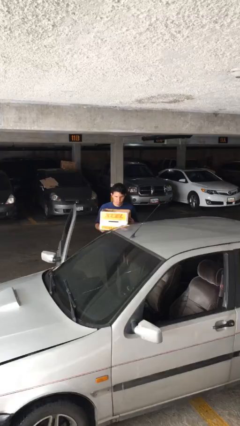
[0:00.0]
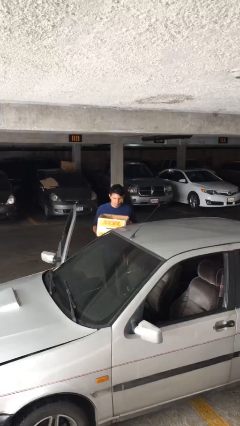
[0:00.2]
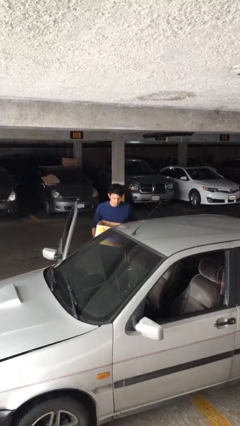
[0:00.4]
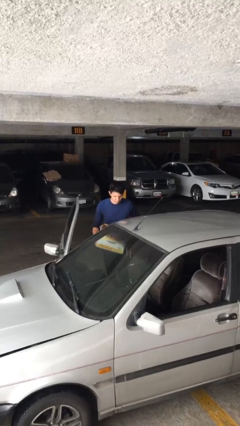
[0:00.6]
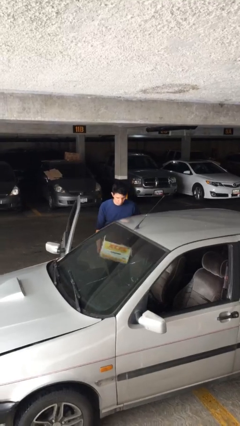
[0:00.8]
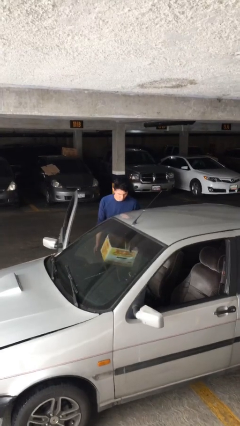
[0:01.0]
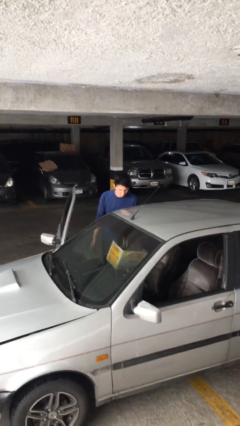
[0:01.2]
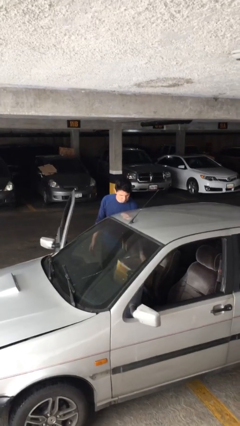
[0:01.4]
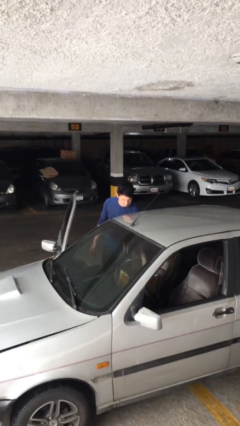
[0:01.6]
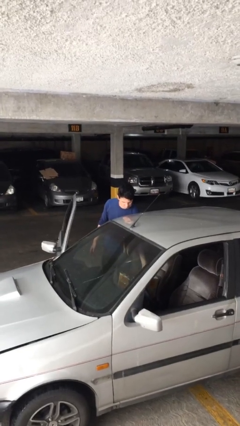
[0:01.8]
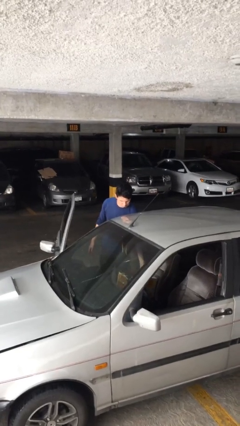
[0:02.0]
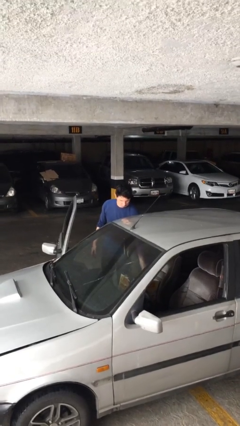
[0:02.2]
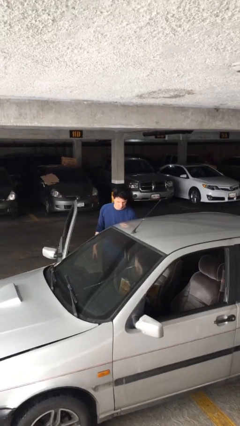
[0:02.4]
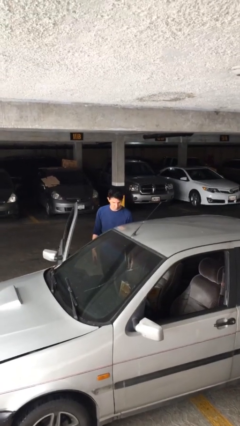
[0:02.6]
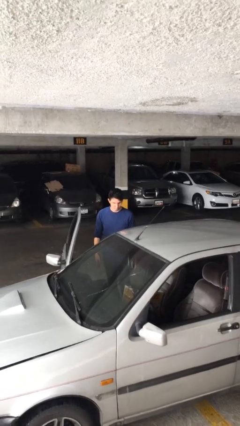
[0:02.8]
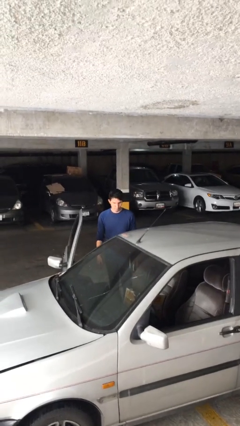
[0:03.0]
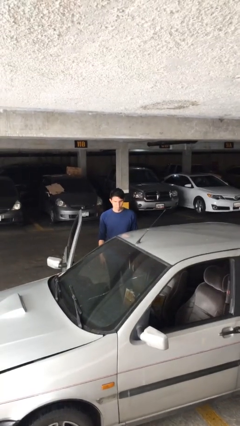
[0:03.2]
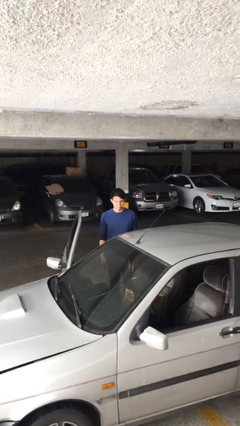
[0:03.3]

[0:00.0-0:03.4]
person loads car

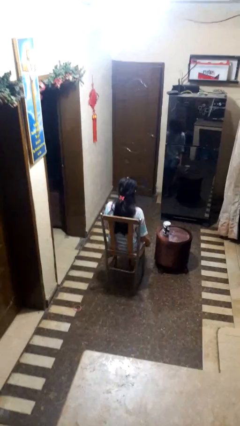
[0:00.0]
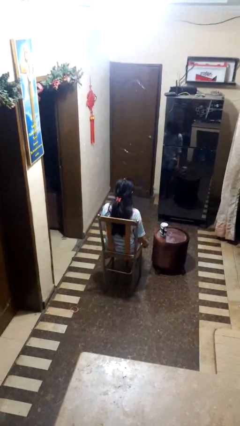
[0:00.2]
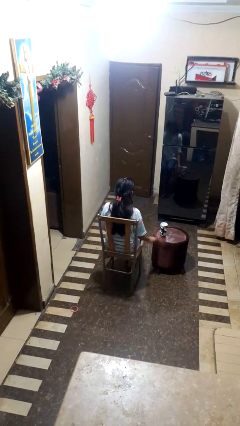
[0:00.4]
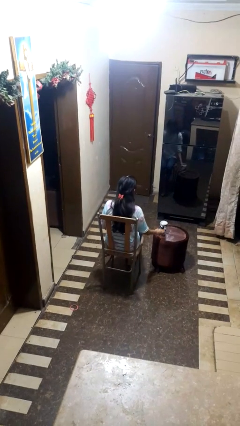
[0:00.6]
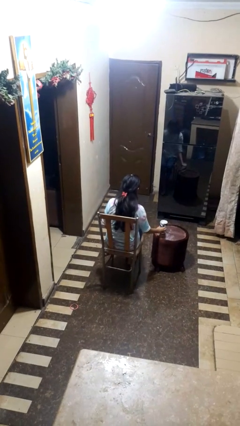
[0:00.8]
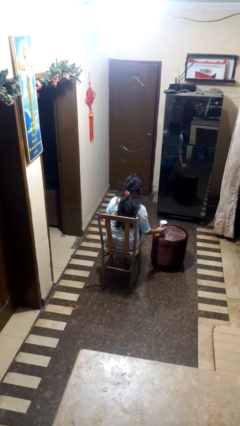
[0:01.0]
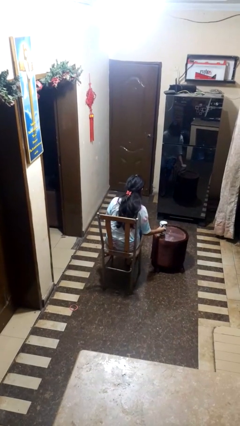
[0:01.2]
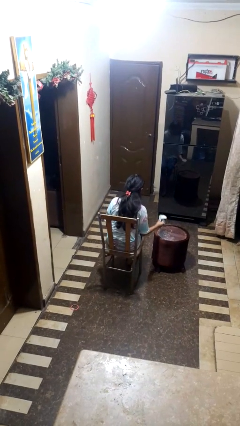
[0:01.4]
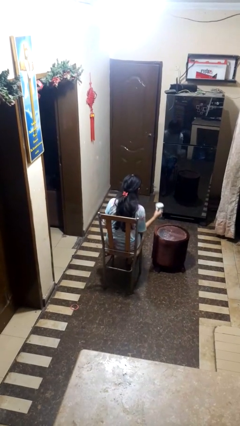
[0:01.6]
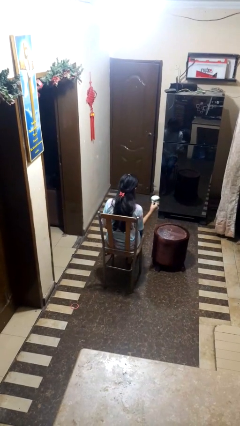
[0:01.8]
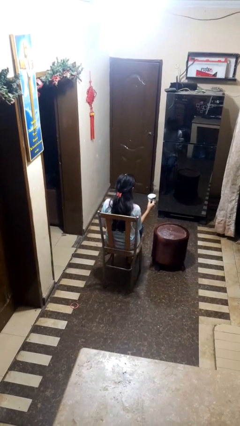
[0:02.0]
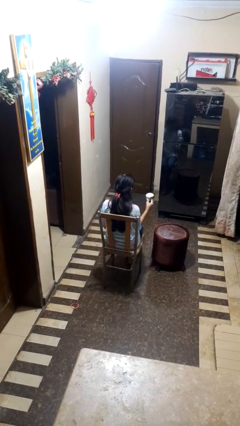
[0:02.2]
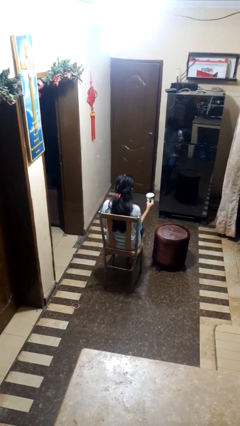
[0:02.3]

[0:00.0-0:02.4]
person picks up object from table

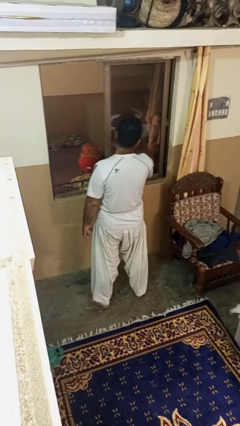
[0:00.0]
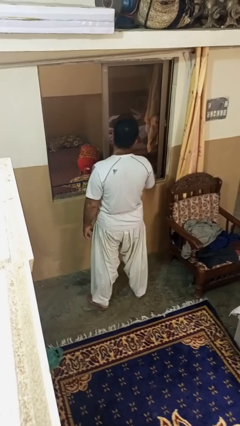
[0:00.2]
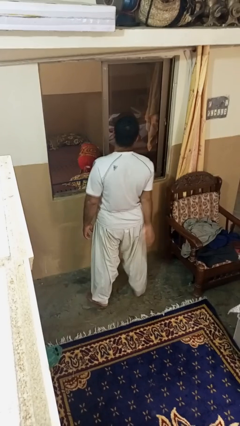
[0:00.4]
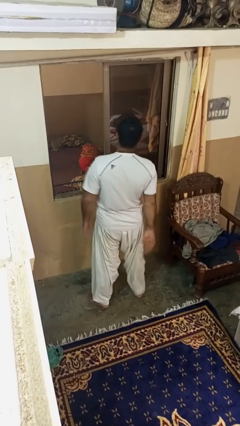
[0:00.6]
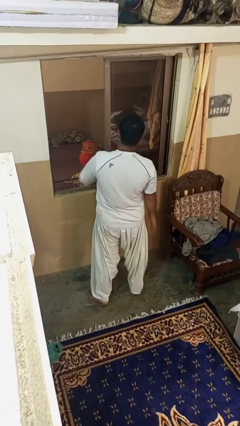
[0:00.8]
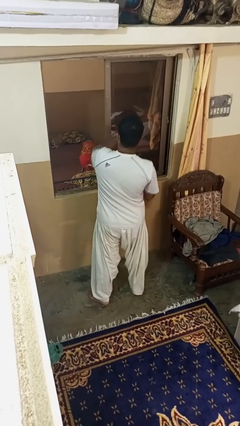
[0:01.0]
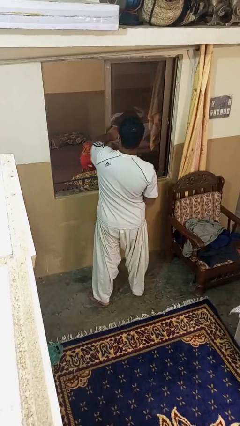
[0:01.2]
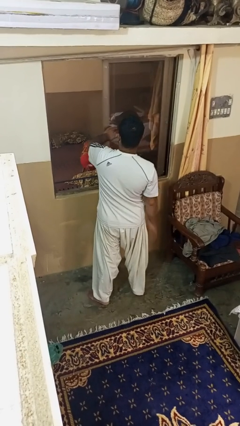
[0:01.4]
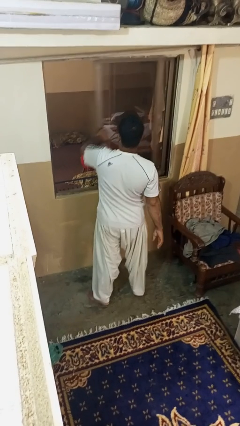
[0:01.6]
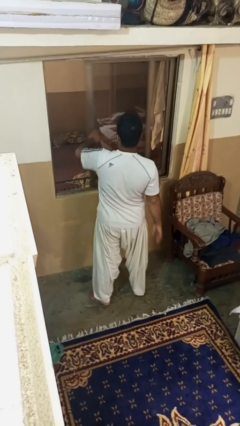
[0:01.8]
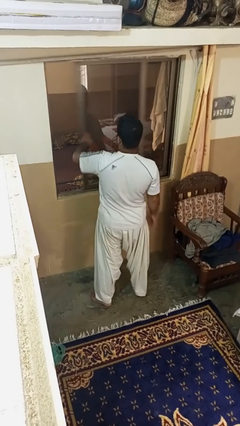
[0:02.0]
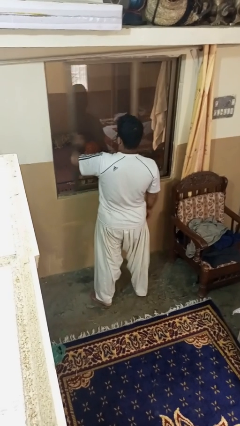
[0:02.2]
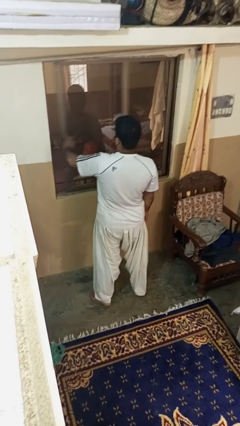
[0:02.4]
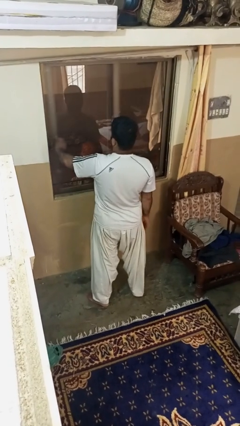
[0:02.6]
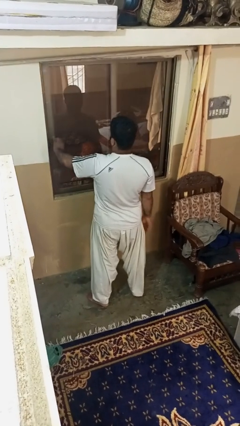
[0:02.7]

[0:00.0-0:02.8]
person closes home window

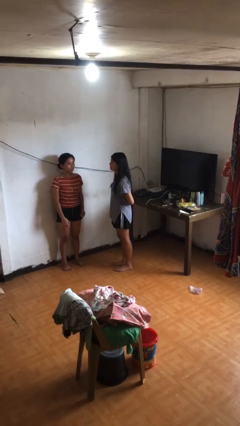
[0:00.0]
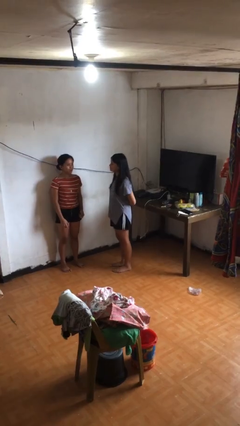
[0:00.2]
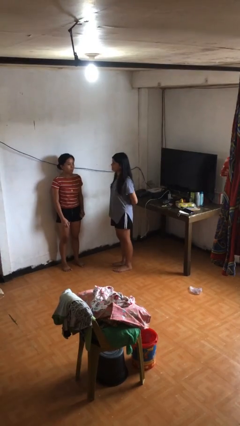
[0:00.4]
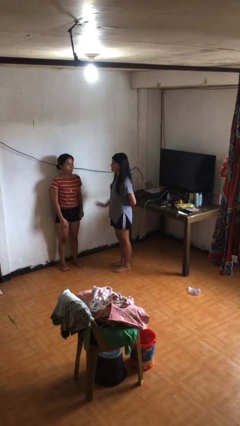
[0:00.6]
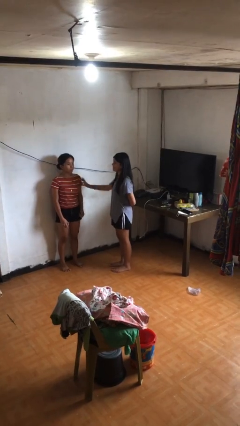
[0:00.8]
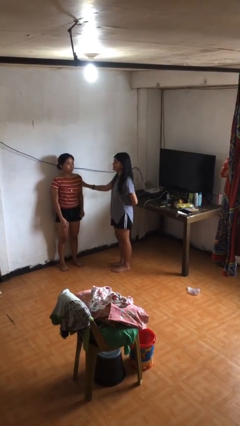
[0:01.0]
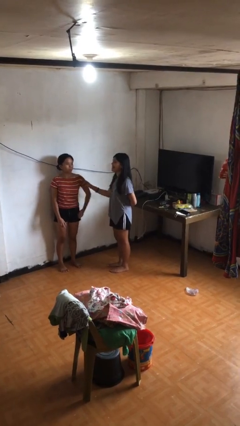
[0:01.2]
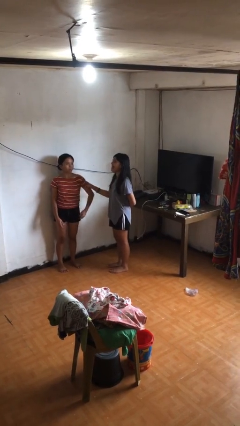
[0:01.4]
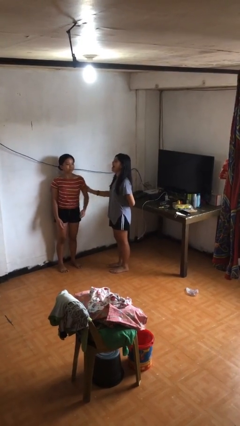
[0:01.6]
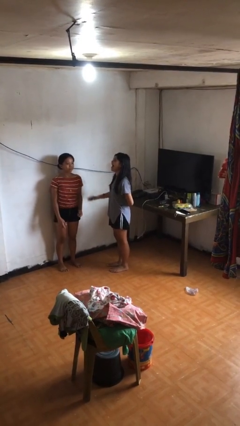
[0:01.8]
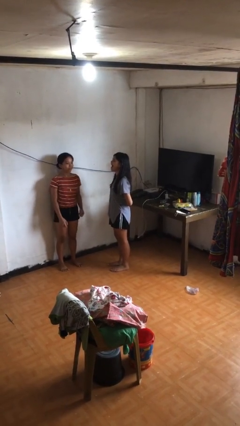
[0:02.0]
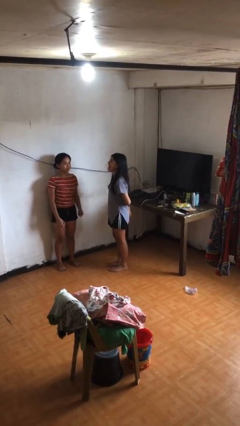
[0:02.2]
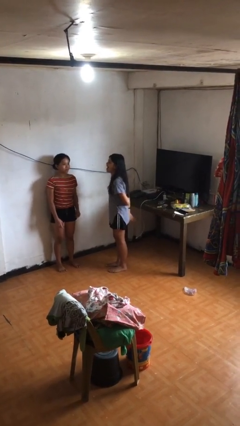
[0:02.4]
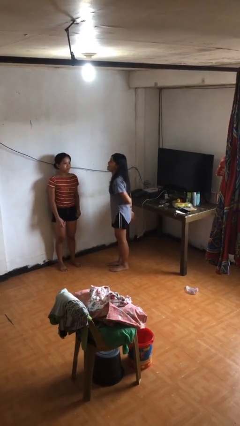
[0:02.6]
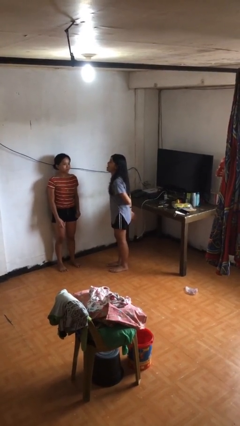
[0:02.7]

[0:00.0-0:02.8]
person grabs person by bicep

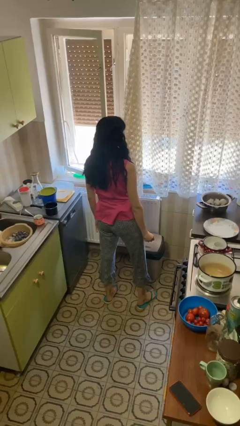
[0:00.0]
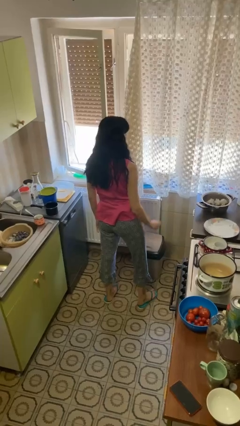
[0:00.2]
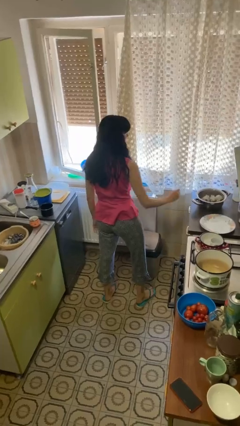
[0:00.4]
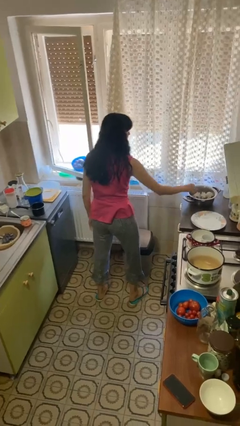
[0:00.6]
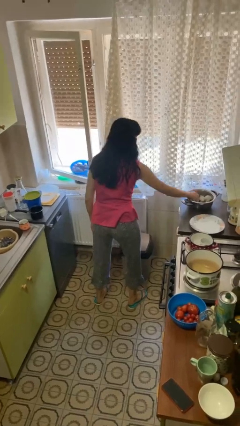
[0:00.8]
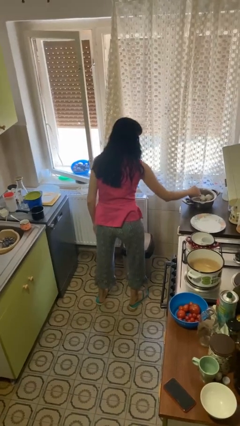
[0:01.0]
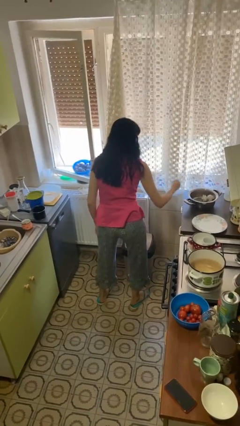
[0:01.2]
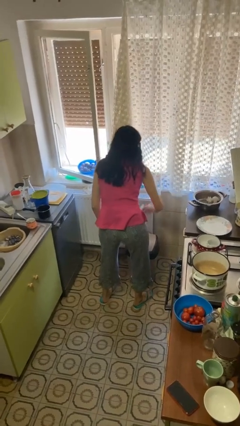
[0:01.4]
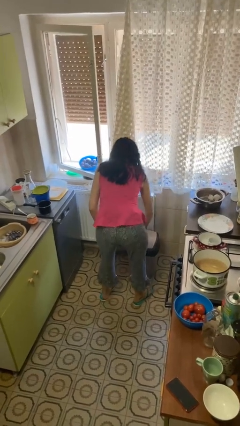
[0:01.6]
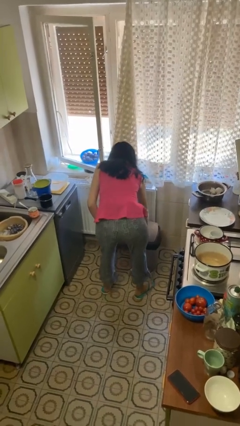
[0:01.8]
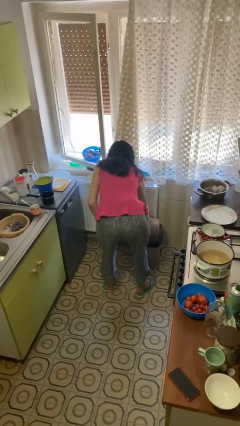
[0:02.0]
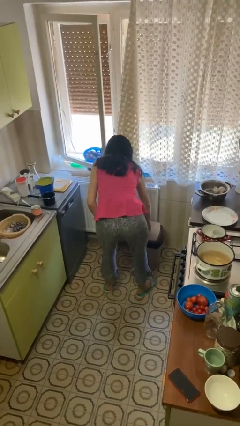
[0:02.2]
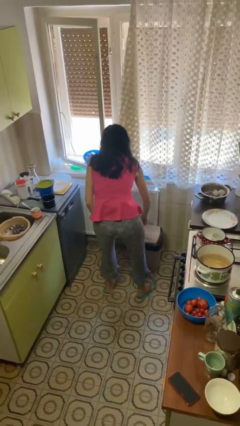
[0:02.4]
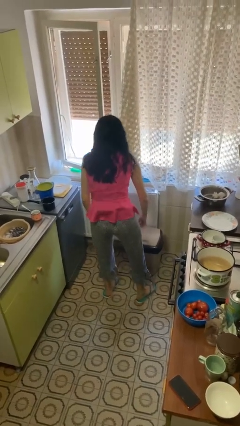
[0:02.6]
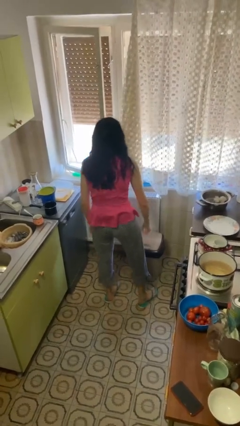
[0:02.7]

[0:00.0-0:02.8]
person discards trash

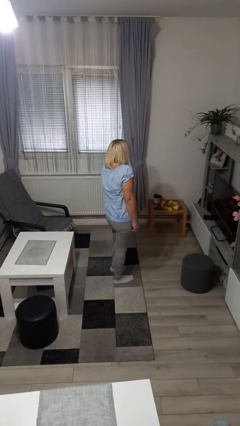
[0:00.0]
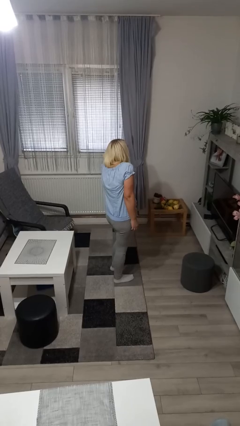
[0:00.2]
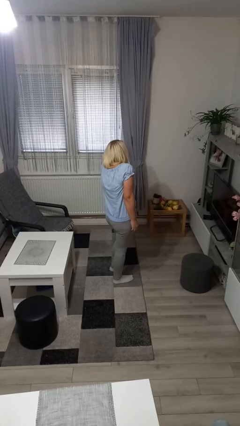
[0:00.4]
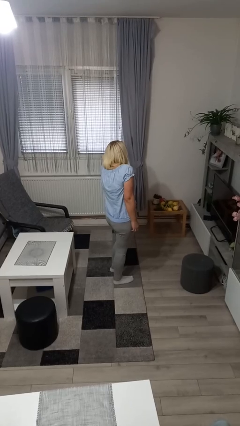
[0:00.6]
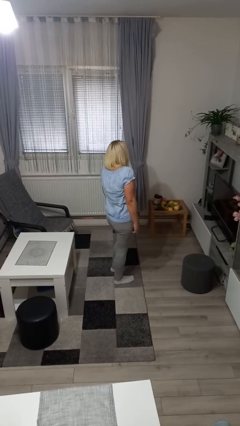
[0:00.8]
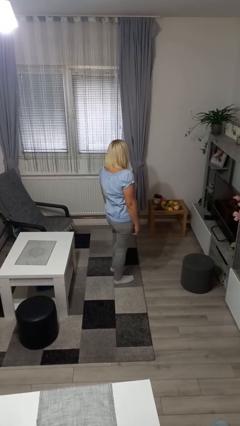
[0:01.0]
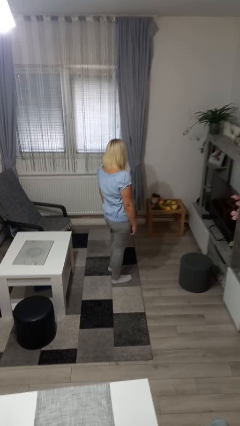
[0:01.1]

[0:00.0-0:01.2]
person shrugs

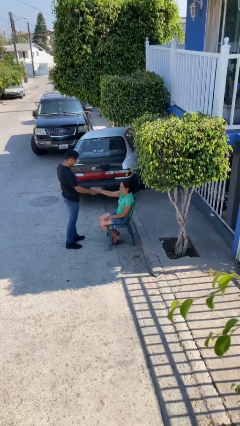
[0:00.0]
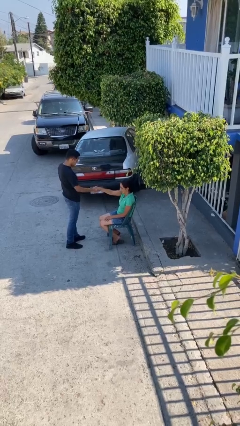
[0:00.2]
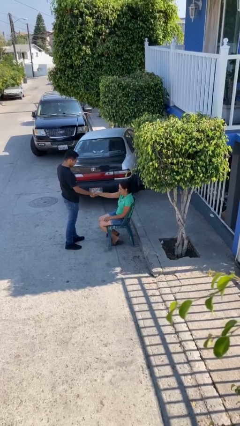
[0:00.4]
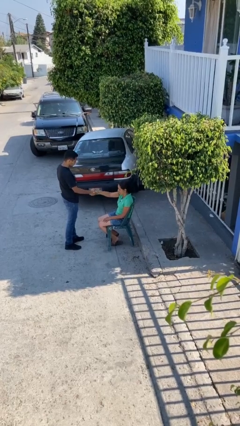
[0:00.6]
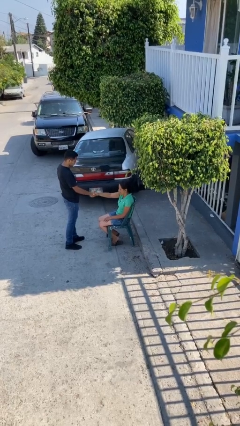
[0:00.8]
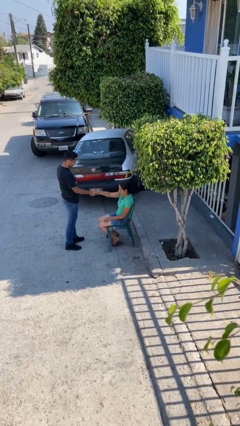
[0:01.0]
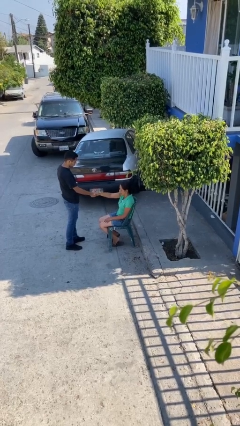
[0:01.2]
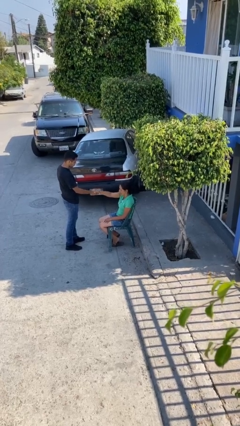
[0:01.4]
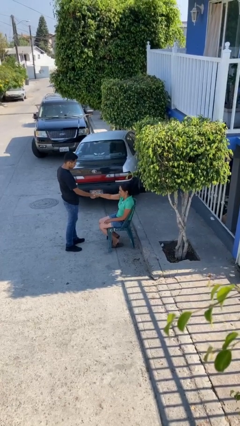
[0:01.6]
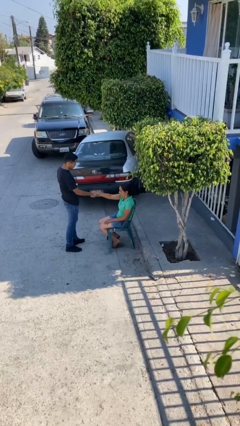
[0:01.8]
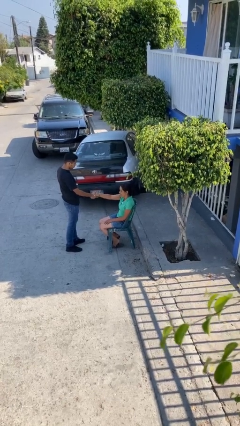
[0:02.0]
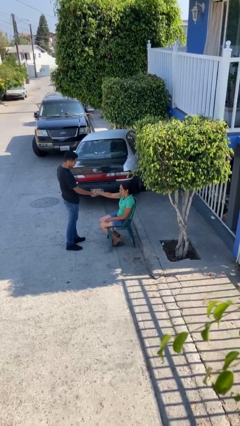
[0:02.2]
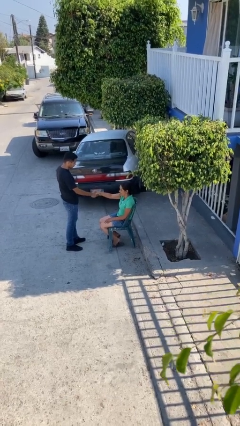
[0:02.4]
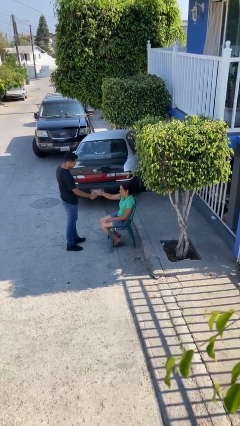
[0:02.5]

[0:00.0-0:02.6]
person shakes hand
